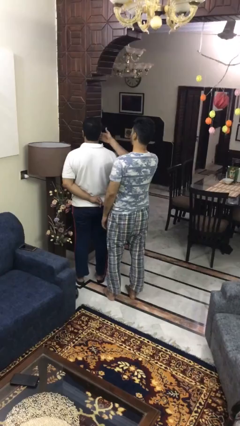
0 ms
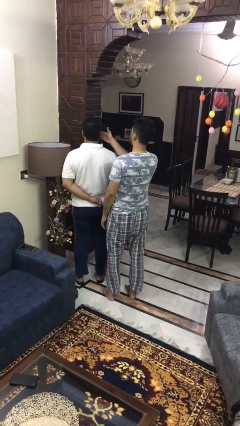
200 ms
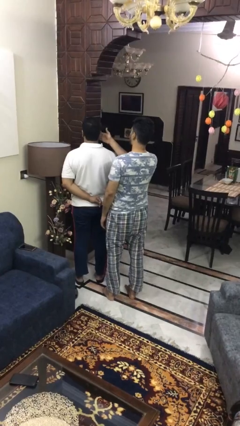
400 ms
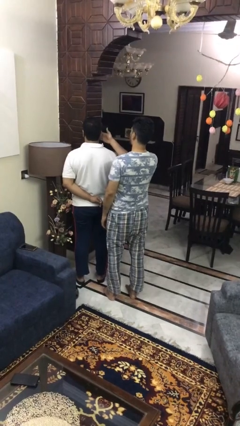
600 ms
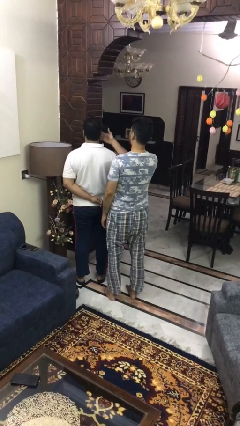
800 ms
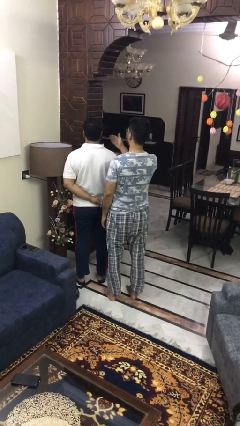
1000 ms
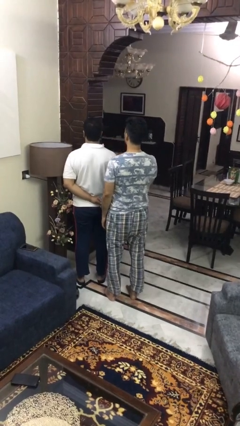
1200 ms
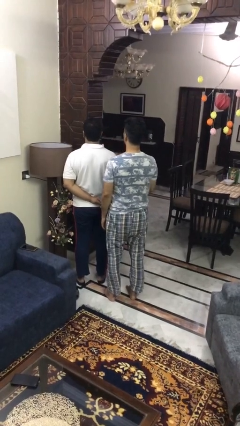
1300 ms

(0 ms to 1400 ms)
person touches face of person

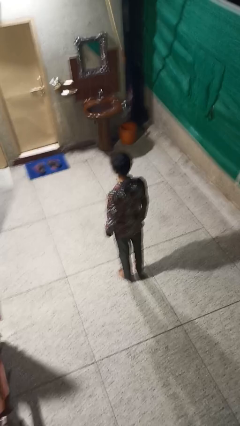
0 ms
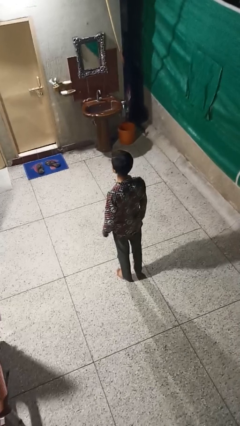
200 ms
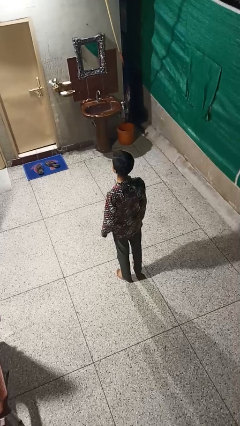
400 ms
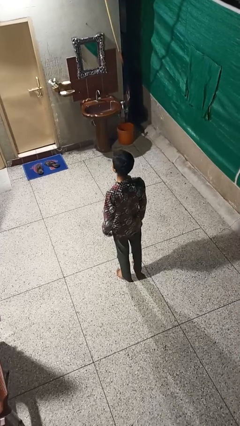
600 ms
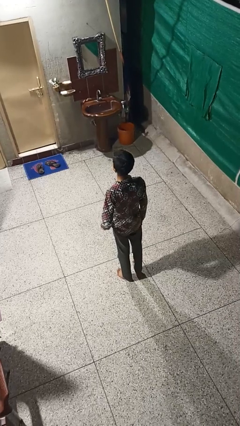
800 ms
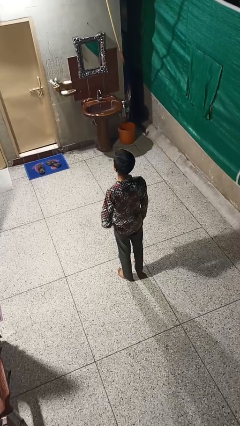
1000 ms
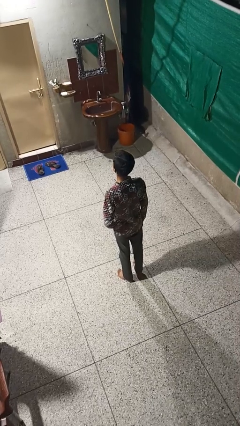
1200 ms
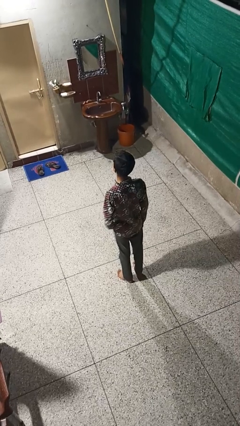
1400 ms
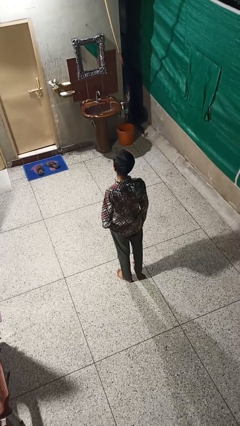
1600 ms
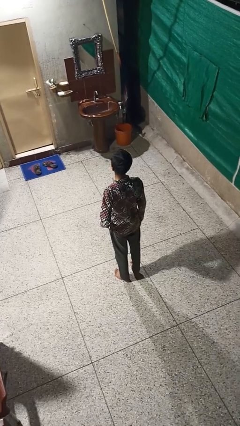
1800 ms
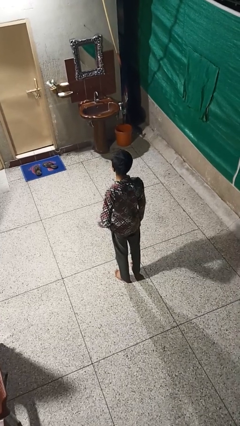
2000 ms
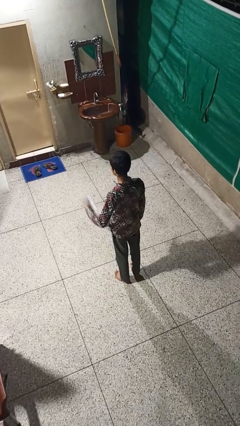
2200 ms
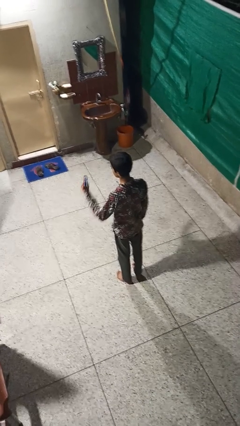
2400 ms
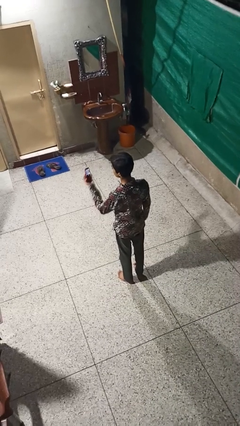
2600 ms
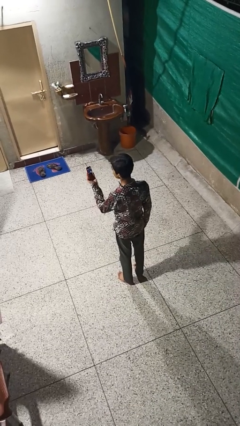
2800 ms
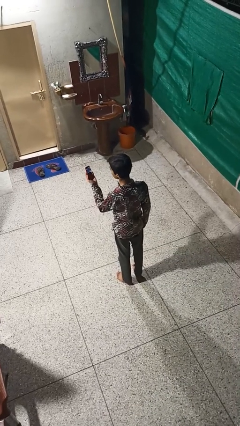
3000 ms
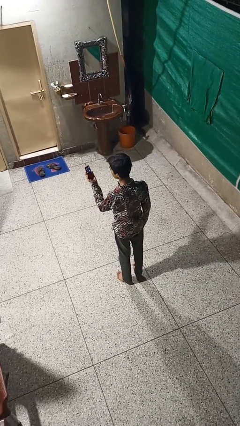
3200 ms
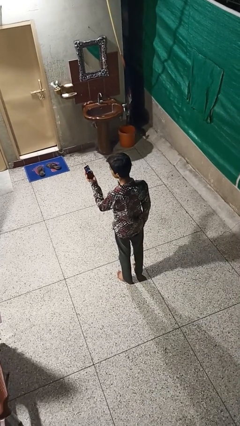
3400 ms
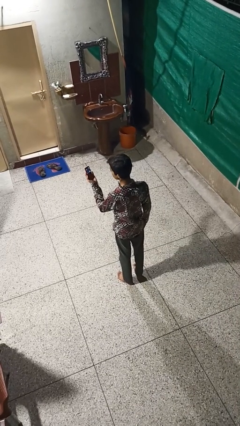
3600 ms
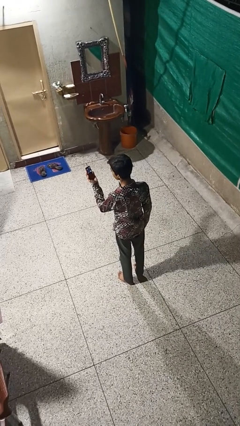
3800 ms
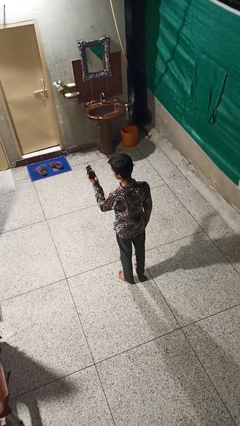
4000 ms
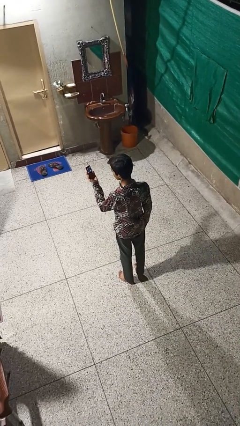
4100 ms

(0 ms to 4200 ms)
person takes phone from pocket

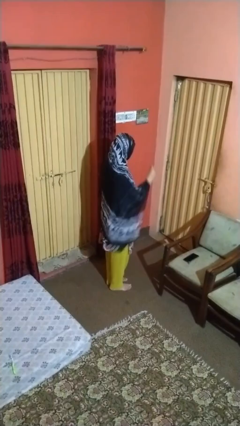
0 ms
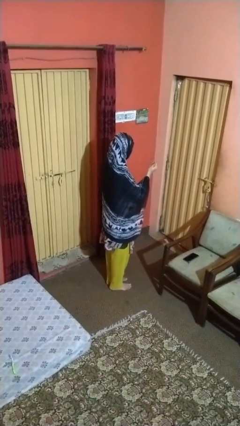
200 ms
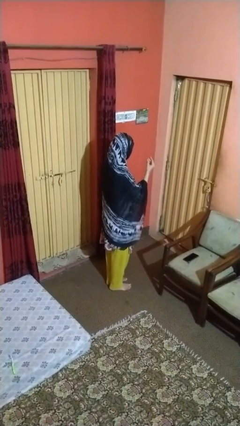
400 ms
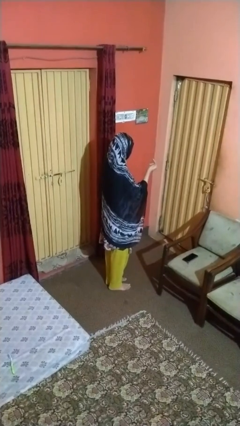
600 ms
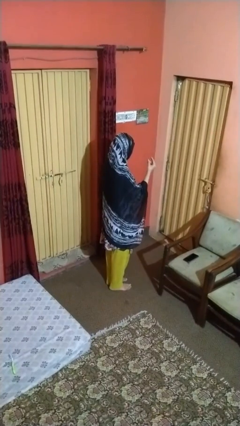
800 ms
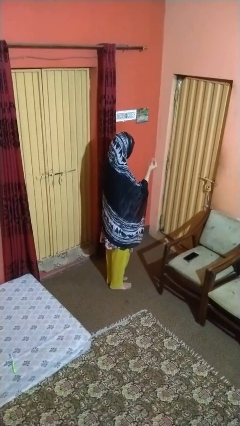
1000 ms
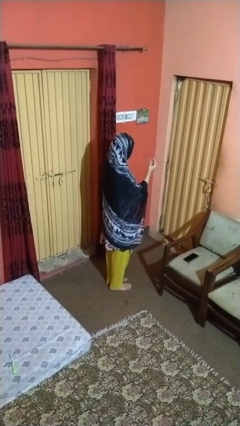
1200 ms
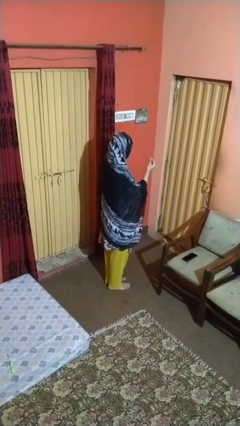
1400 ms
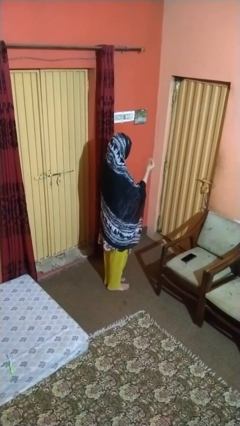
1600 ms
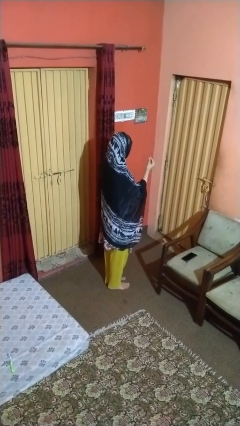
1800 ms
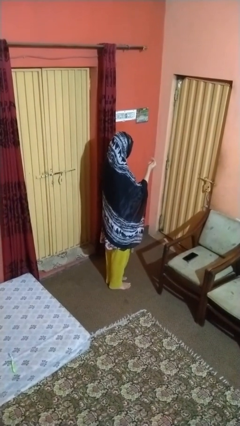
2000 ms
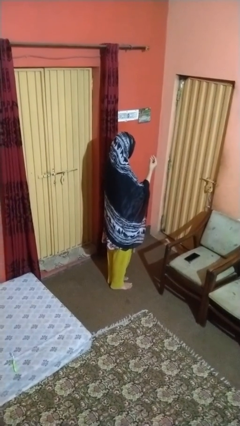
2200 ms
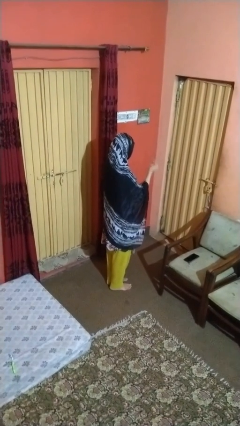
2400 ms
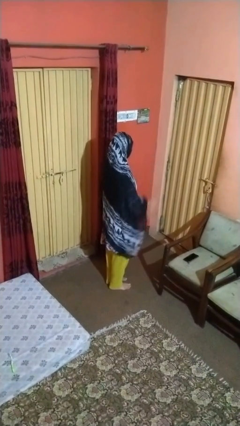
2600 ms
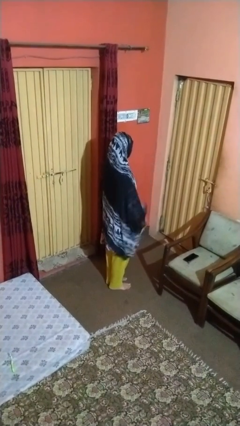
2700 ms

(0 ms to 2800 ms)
person snaps fingers

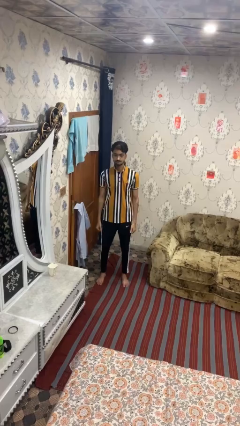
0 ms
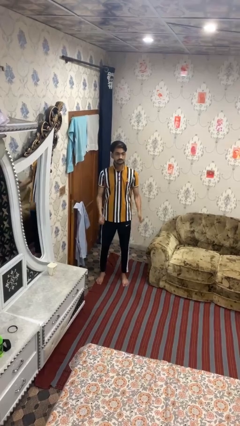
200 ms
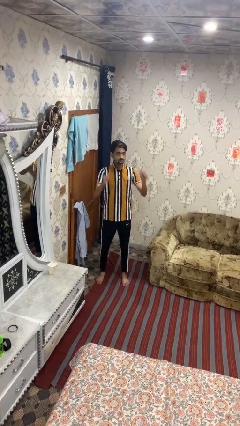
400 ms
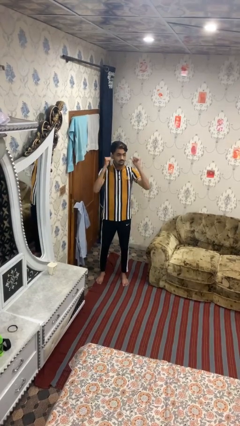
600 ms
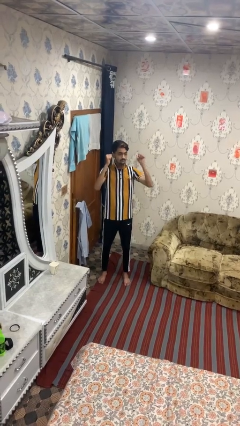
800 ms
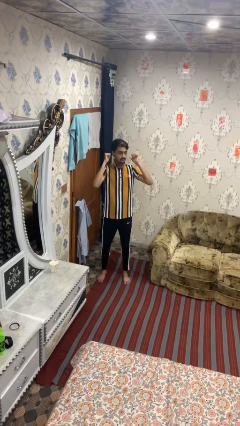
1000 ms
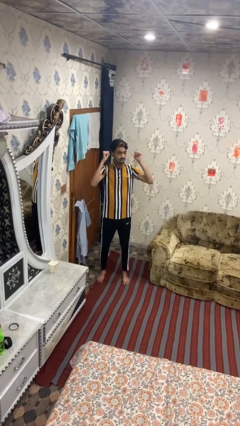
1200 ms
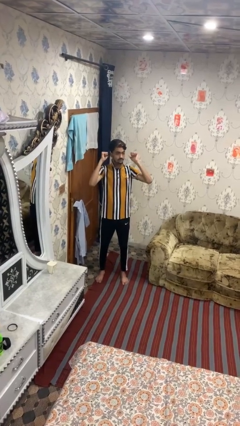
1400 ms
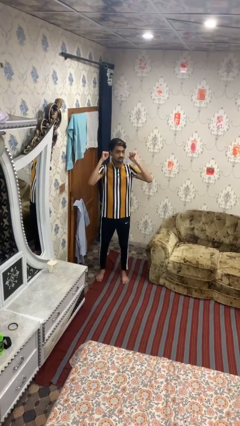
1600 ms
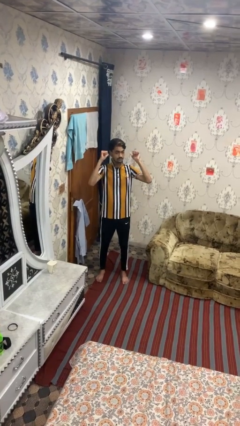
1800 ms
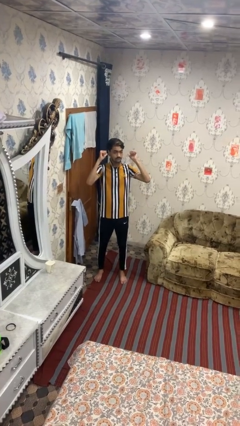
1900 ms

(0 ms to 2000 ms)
person gestures behind me

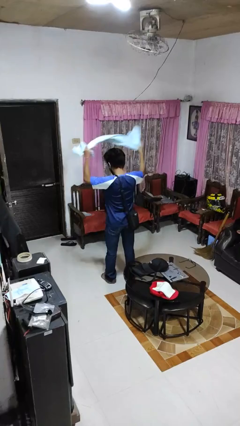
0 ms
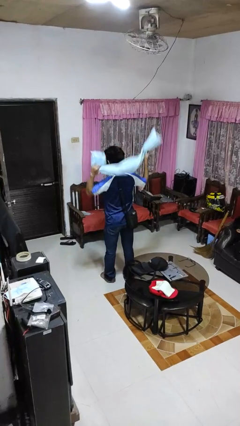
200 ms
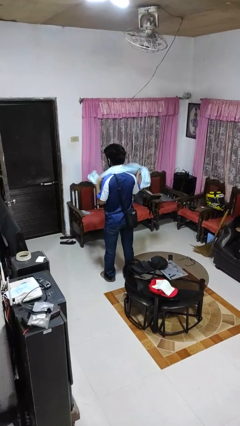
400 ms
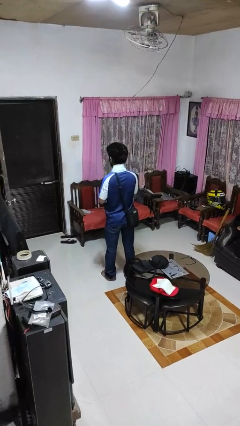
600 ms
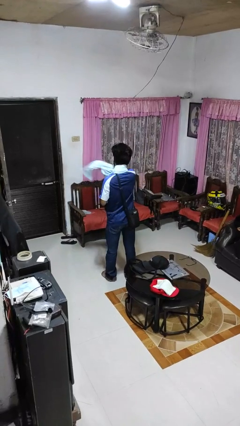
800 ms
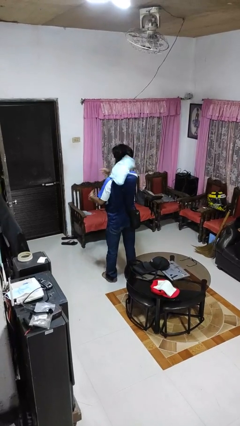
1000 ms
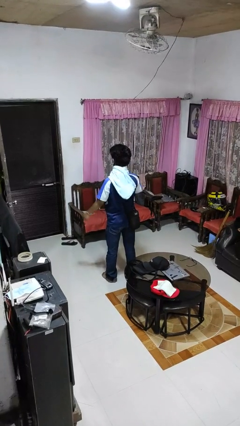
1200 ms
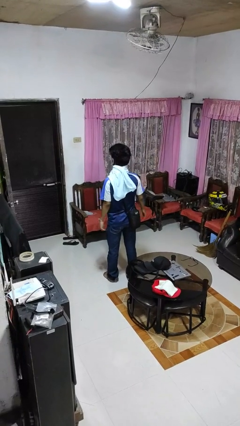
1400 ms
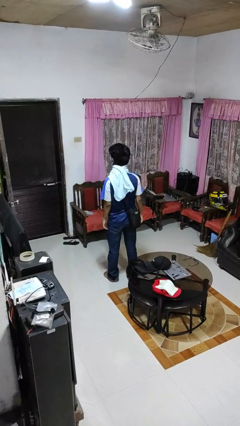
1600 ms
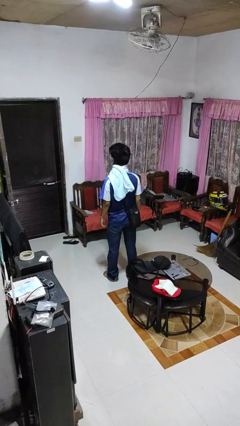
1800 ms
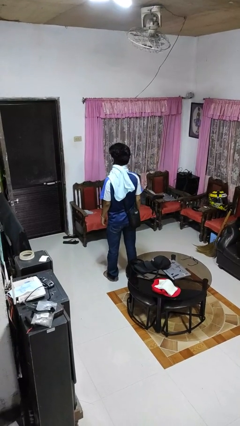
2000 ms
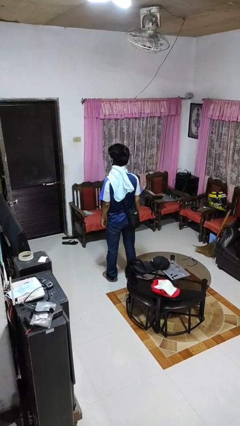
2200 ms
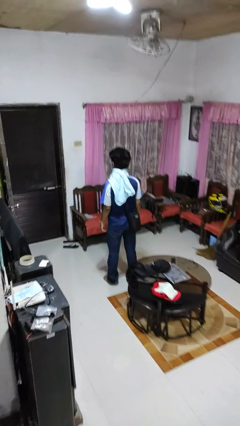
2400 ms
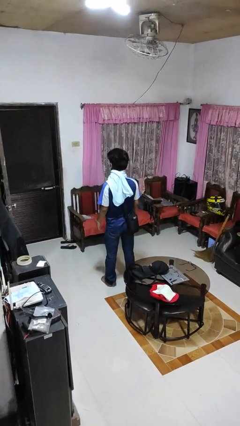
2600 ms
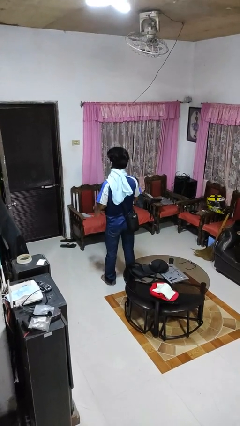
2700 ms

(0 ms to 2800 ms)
person puts on scarf

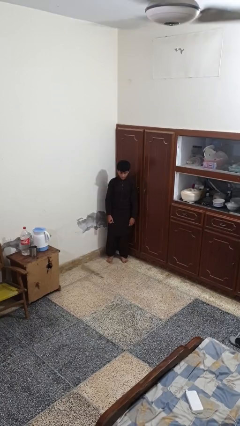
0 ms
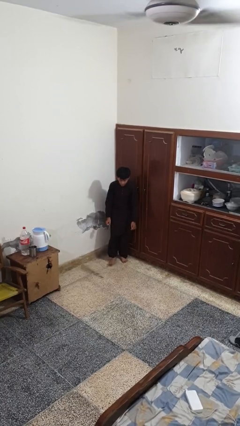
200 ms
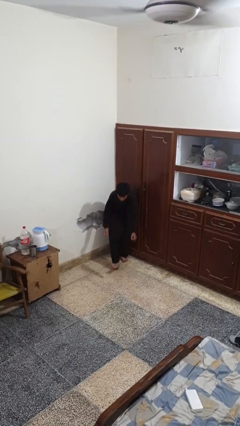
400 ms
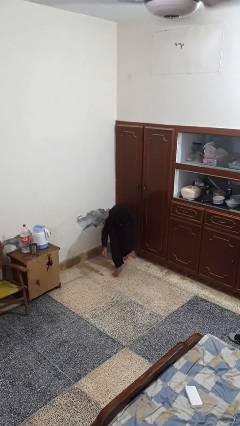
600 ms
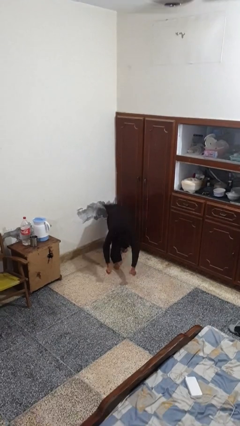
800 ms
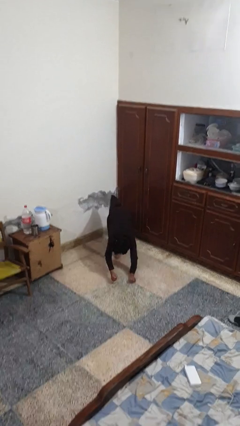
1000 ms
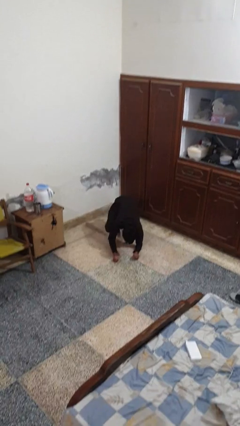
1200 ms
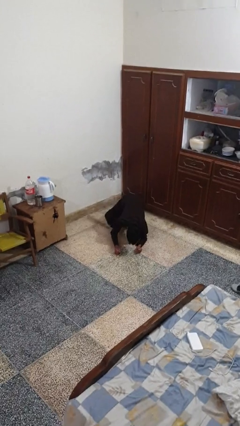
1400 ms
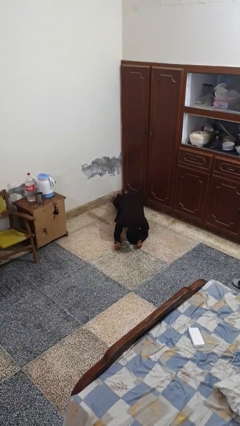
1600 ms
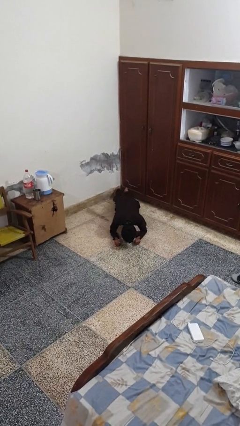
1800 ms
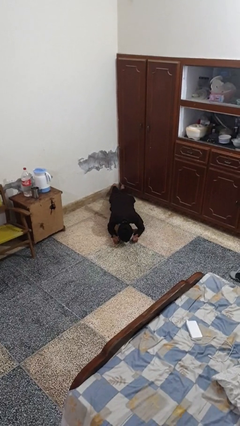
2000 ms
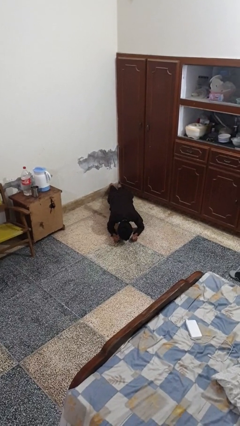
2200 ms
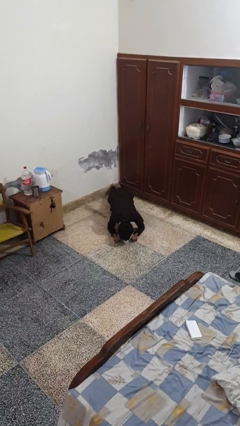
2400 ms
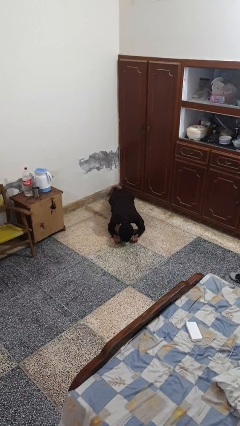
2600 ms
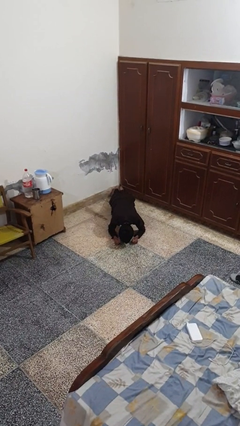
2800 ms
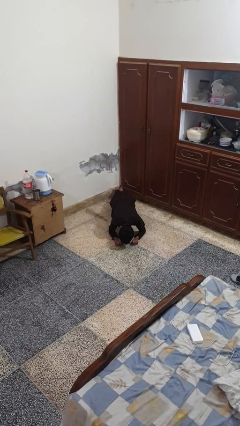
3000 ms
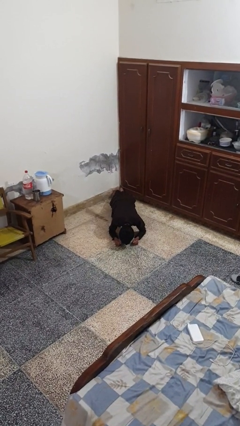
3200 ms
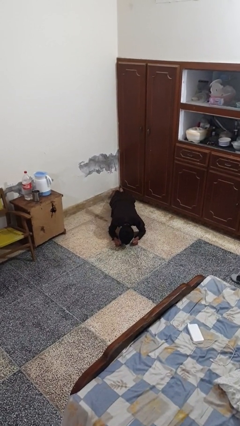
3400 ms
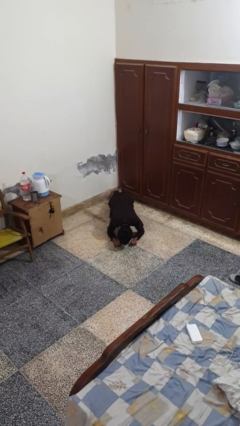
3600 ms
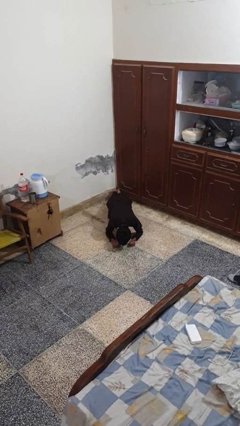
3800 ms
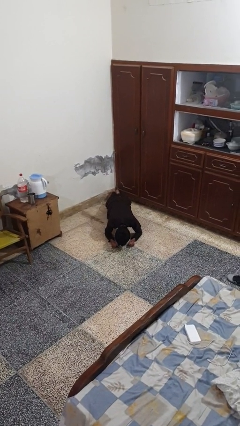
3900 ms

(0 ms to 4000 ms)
person exercises with plank

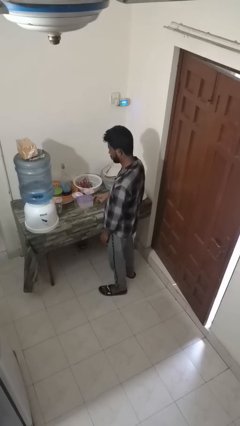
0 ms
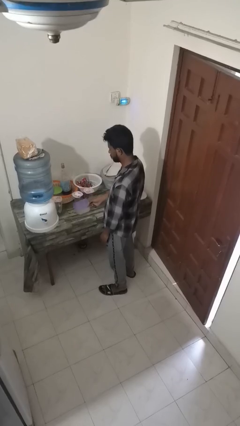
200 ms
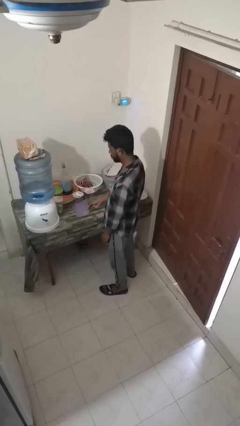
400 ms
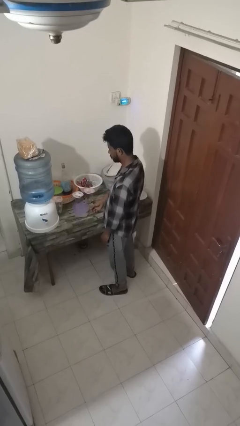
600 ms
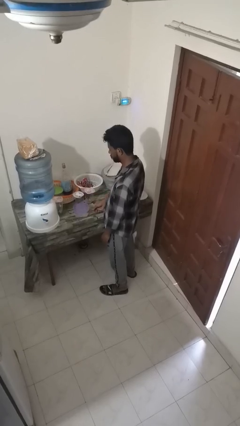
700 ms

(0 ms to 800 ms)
person puts down object on countertop
